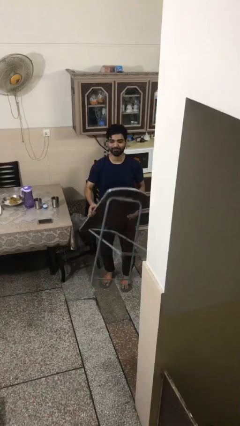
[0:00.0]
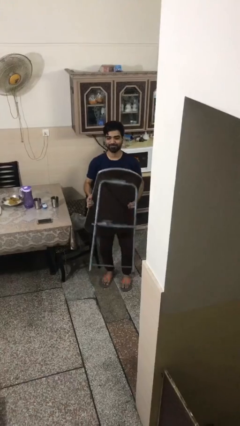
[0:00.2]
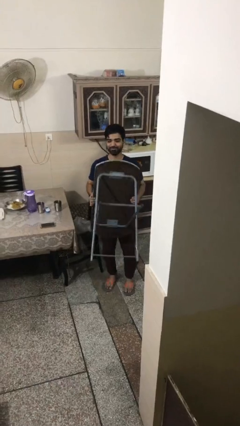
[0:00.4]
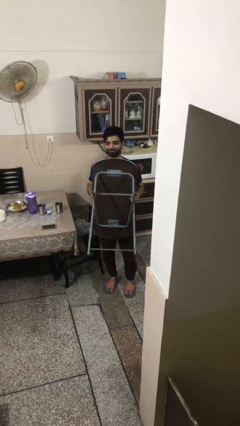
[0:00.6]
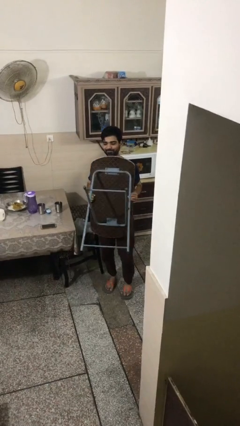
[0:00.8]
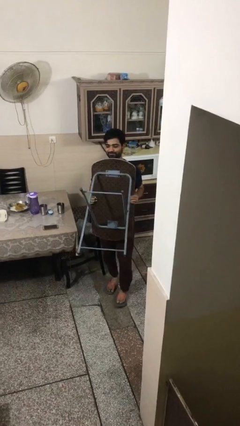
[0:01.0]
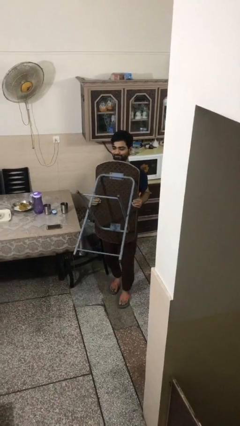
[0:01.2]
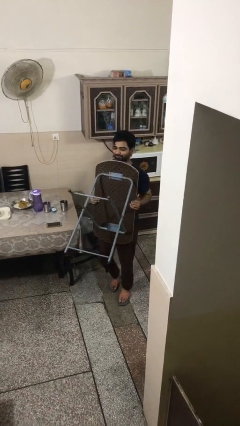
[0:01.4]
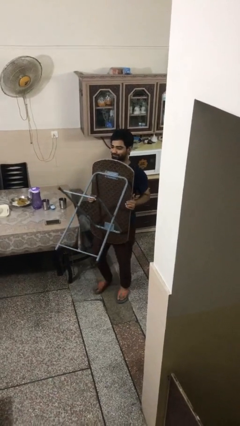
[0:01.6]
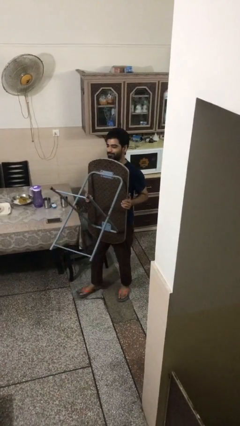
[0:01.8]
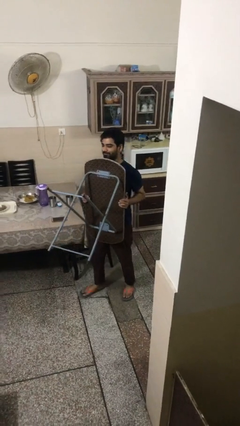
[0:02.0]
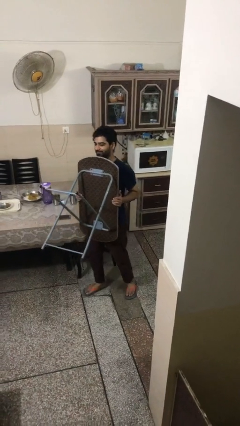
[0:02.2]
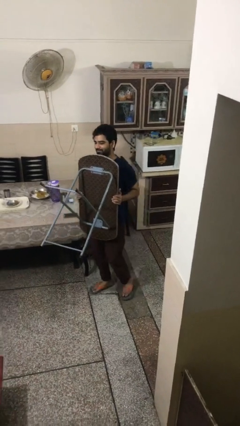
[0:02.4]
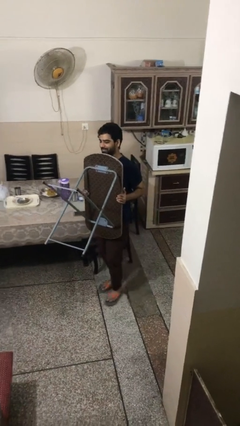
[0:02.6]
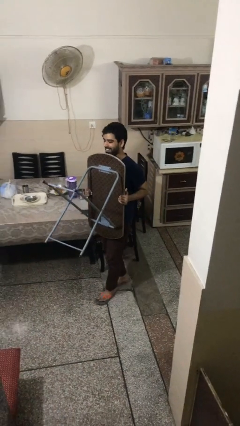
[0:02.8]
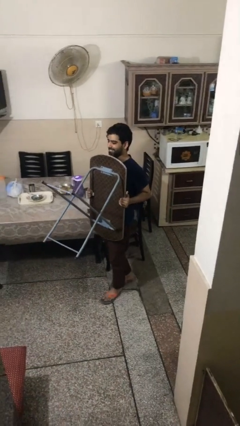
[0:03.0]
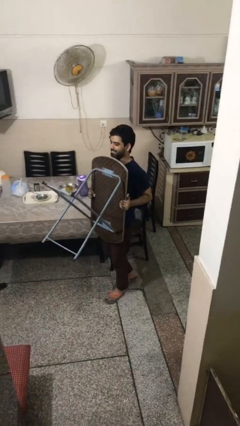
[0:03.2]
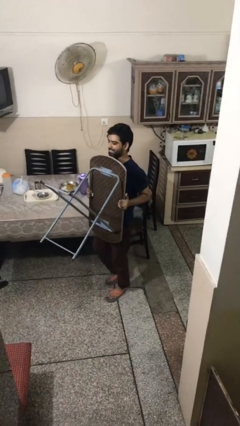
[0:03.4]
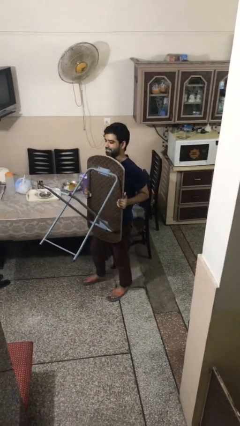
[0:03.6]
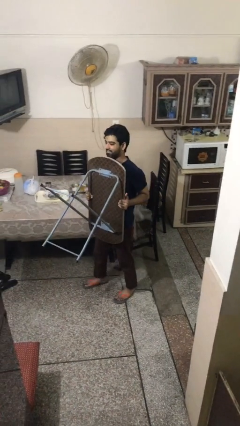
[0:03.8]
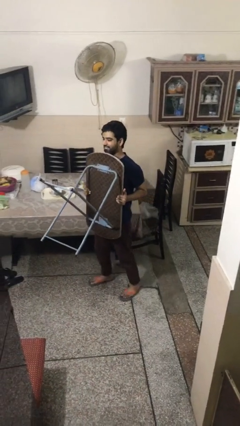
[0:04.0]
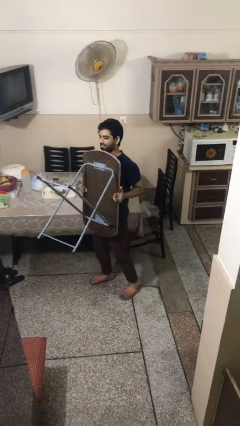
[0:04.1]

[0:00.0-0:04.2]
person carries heavy object

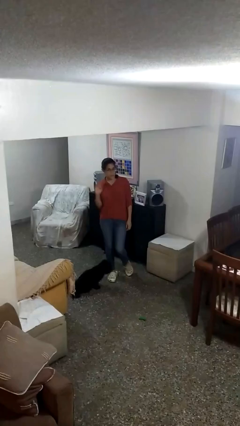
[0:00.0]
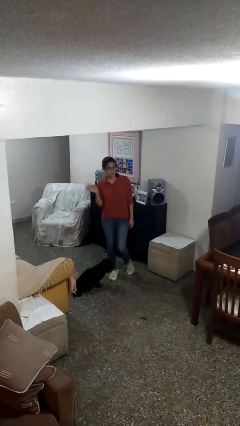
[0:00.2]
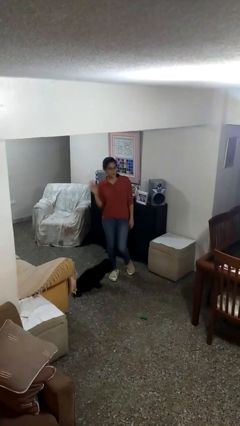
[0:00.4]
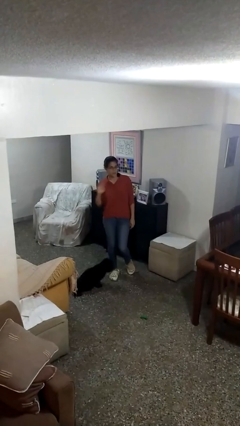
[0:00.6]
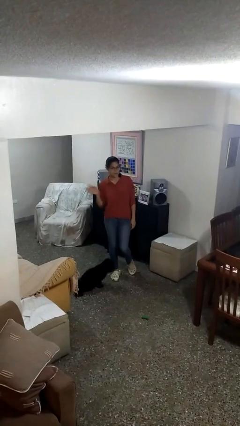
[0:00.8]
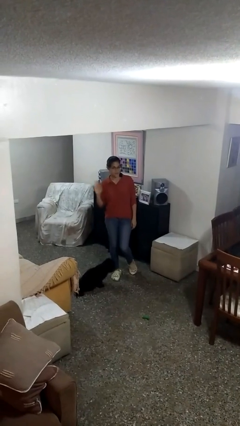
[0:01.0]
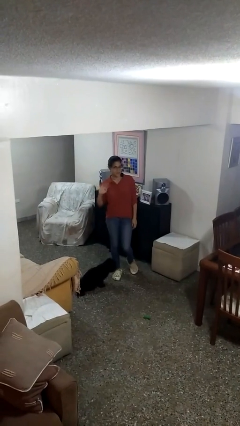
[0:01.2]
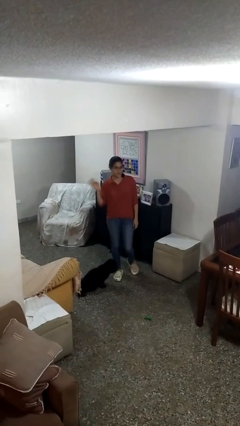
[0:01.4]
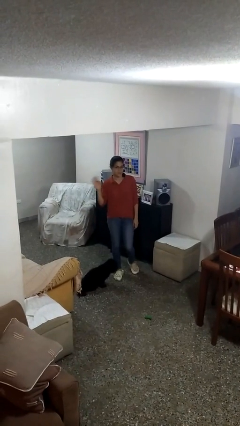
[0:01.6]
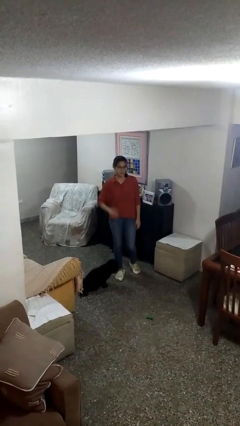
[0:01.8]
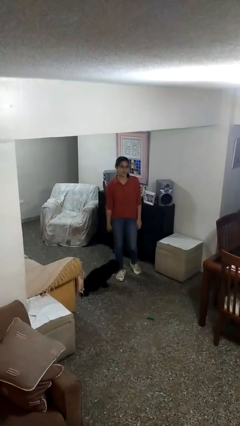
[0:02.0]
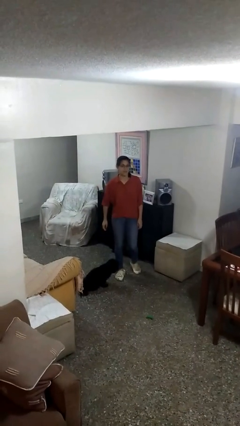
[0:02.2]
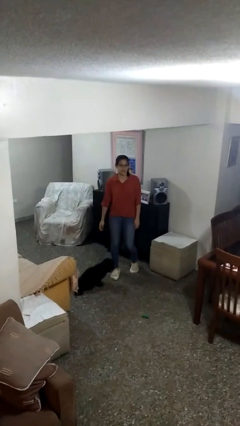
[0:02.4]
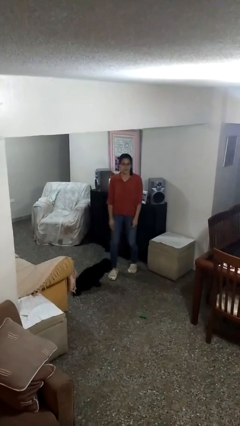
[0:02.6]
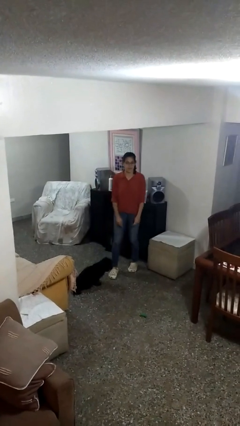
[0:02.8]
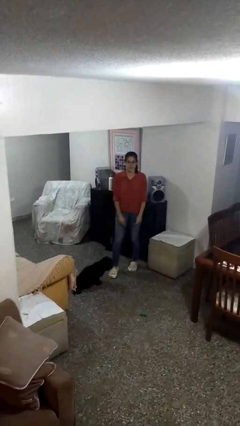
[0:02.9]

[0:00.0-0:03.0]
person waves at person

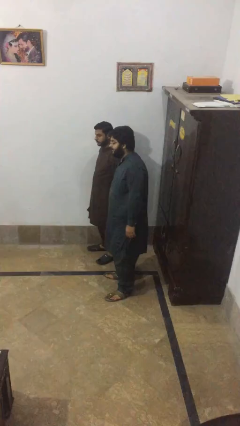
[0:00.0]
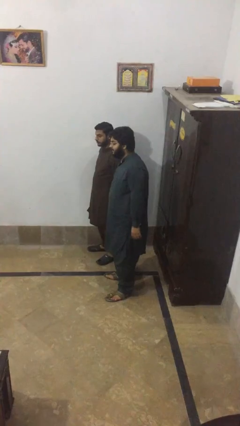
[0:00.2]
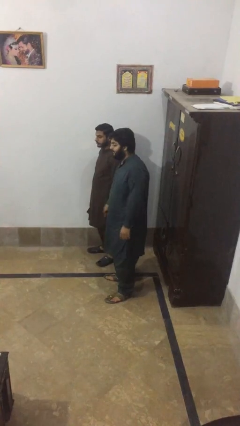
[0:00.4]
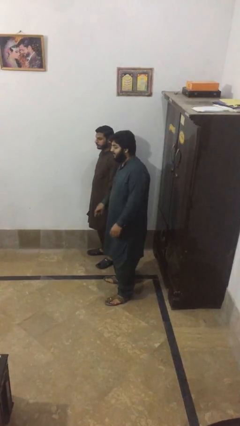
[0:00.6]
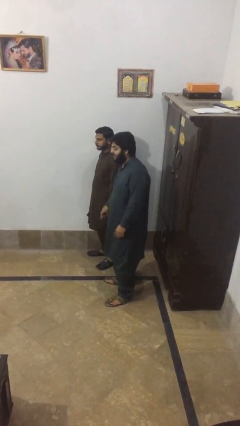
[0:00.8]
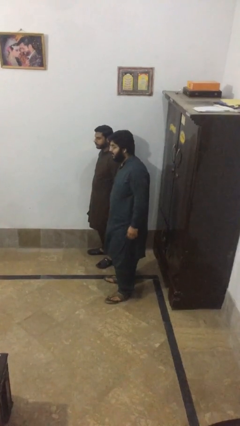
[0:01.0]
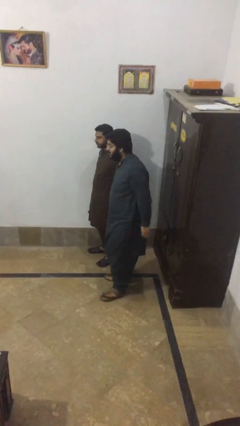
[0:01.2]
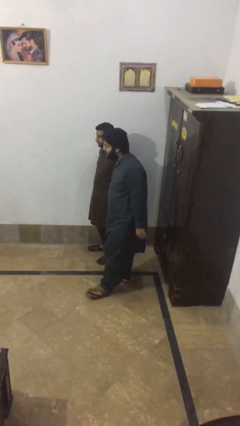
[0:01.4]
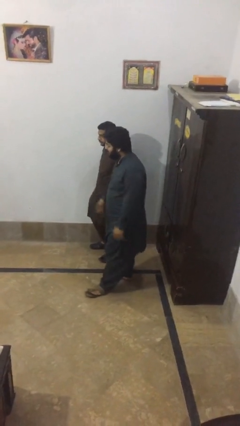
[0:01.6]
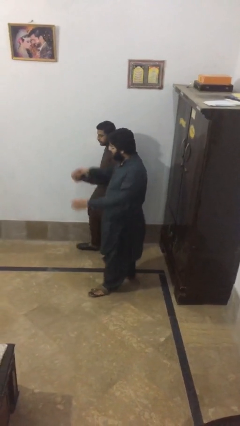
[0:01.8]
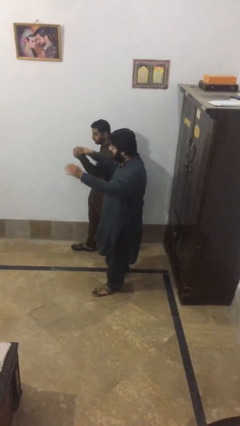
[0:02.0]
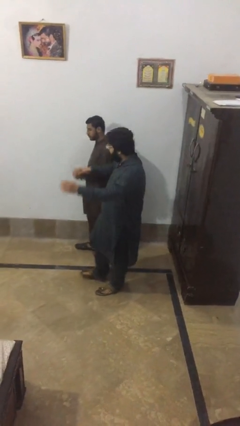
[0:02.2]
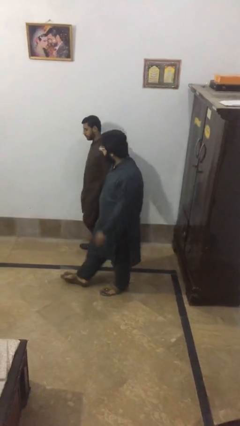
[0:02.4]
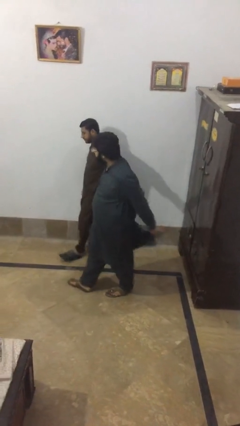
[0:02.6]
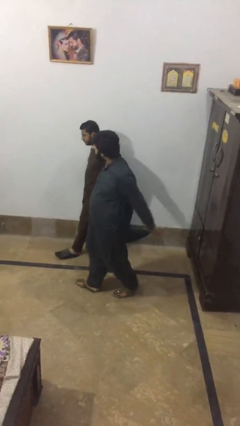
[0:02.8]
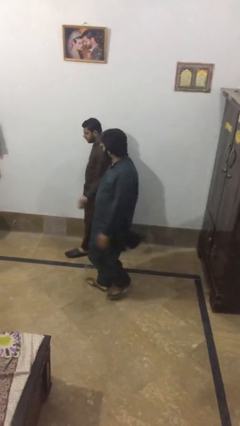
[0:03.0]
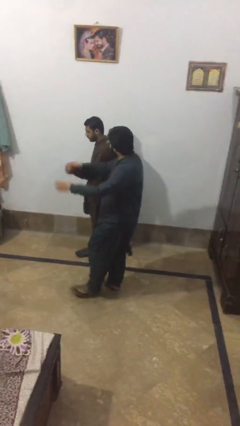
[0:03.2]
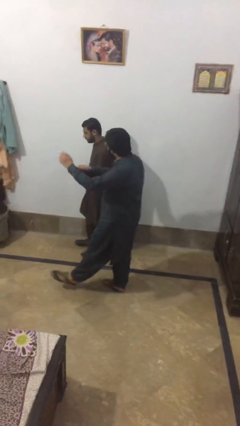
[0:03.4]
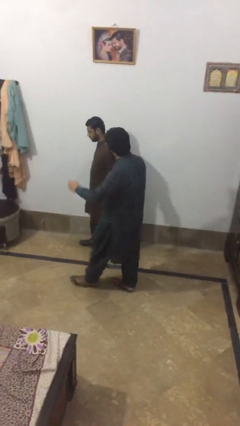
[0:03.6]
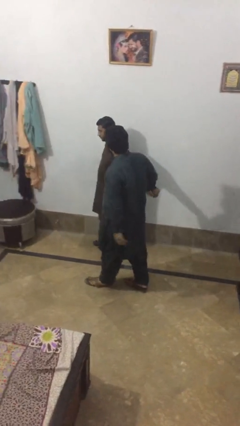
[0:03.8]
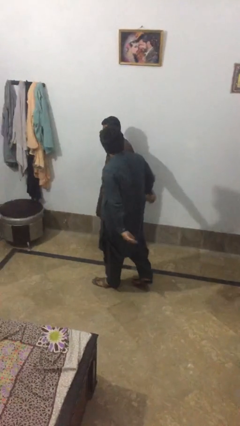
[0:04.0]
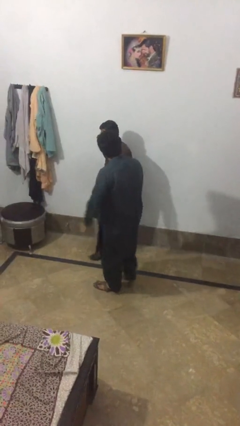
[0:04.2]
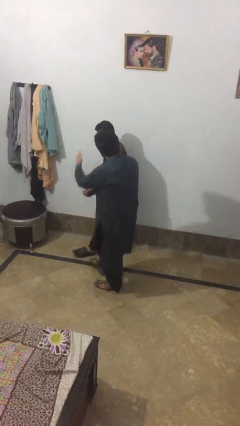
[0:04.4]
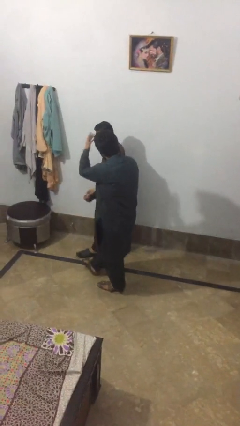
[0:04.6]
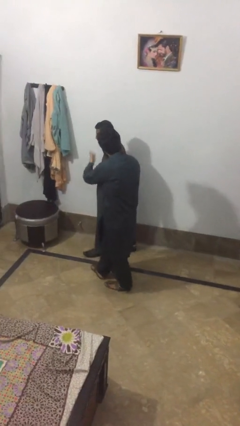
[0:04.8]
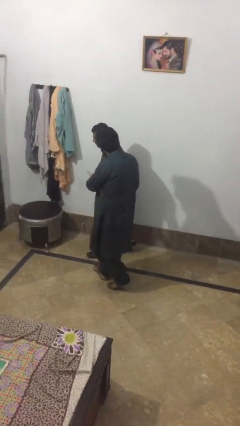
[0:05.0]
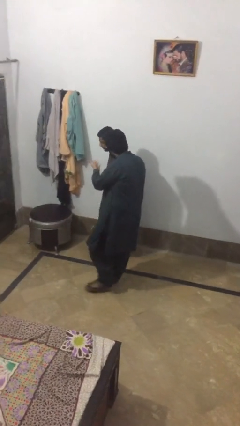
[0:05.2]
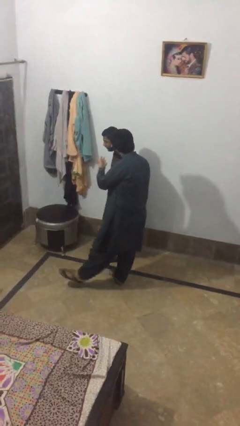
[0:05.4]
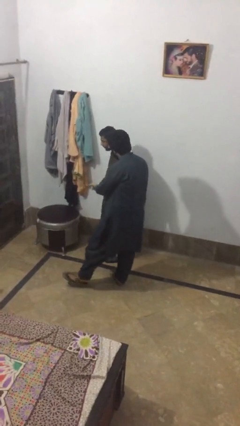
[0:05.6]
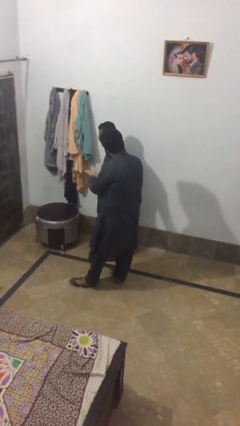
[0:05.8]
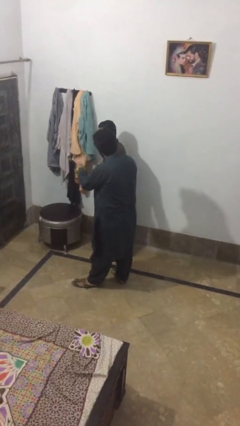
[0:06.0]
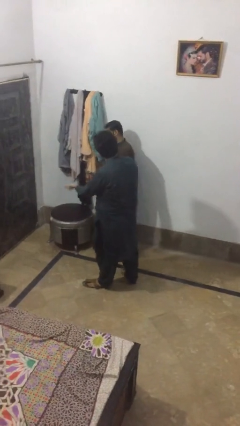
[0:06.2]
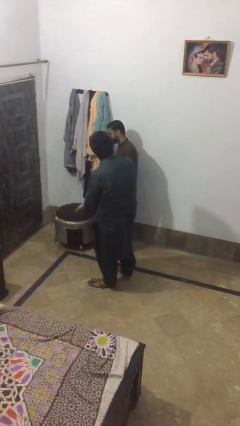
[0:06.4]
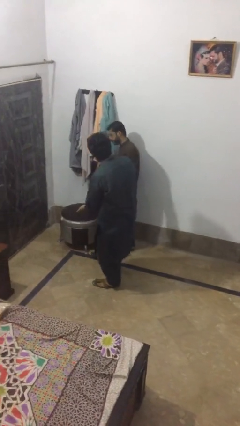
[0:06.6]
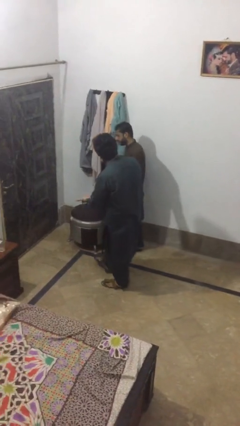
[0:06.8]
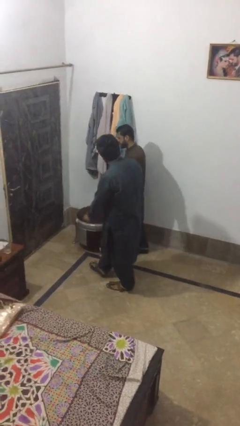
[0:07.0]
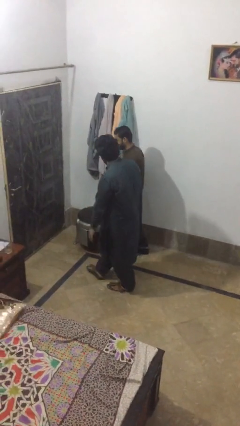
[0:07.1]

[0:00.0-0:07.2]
person holds hand

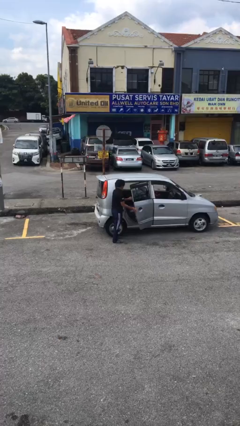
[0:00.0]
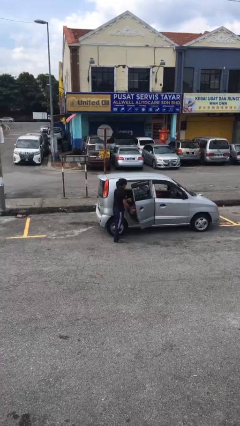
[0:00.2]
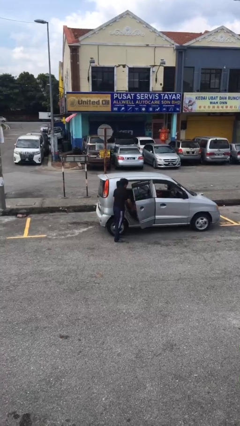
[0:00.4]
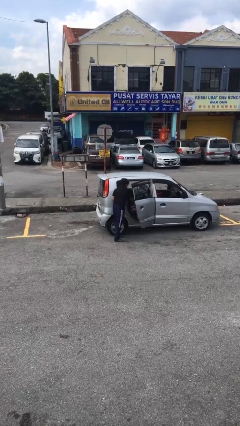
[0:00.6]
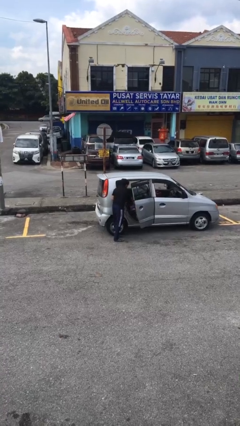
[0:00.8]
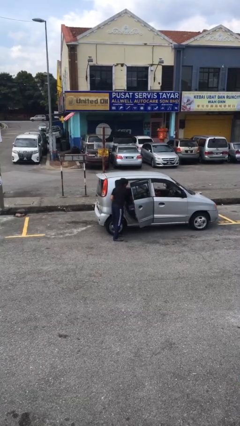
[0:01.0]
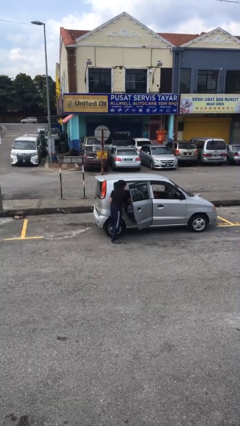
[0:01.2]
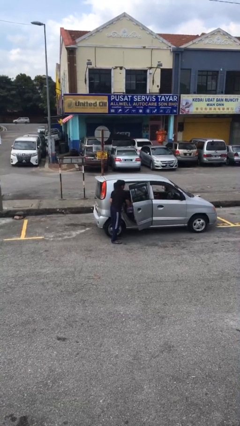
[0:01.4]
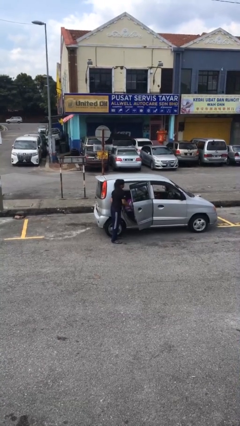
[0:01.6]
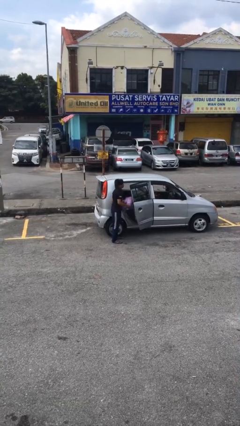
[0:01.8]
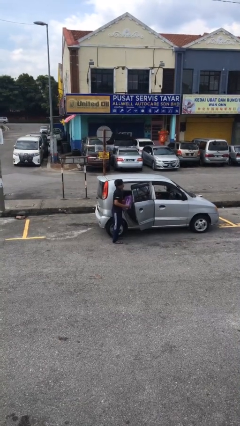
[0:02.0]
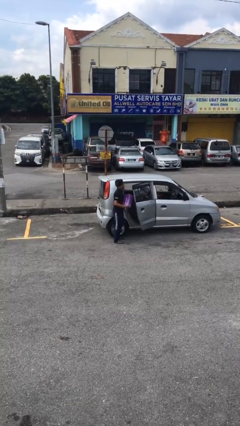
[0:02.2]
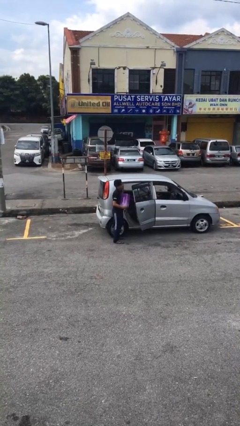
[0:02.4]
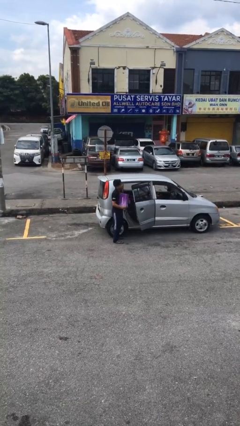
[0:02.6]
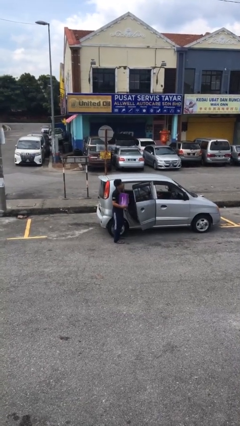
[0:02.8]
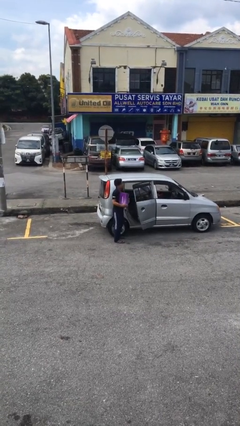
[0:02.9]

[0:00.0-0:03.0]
person unloads car

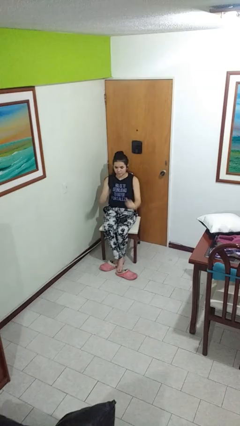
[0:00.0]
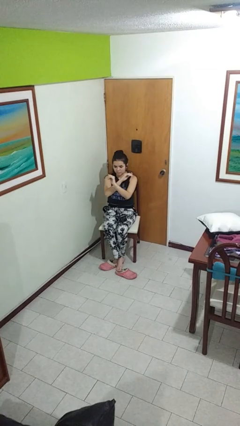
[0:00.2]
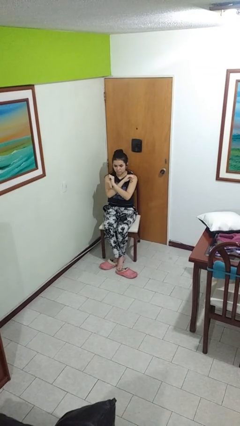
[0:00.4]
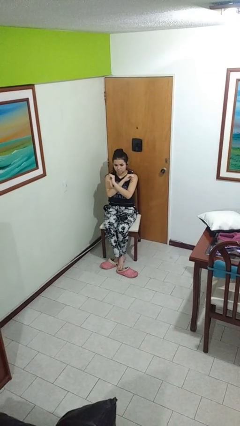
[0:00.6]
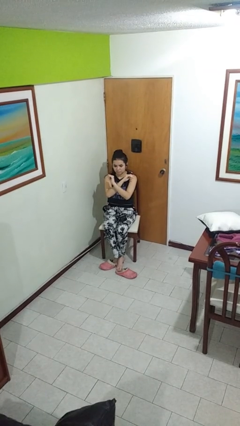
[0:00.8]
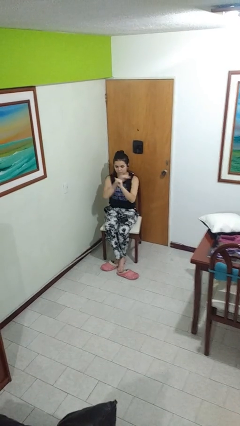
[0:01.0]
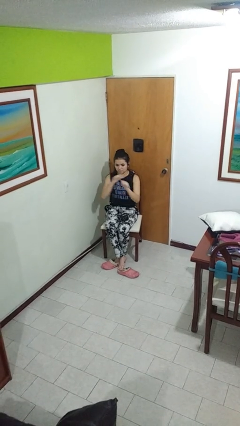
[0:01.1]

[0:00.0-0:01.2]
person gestures arms x
